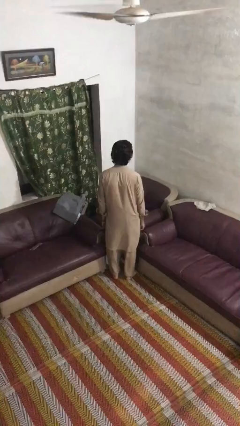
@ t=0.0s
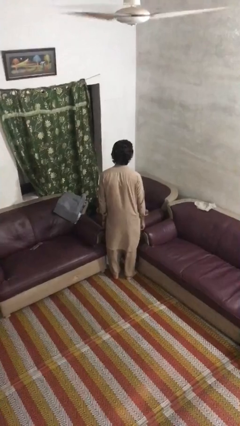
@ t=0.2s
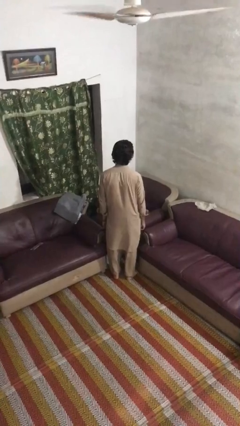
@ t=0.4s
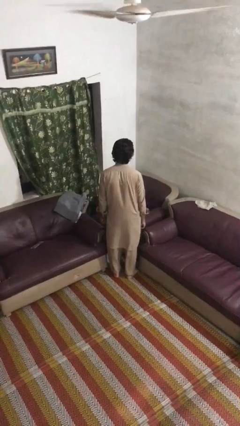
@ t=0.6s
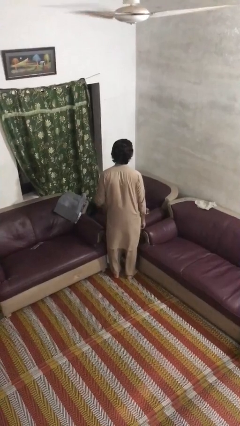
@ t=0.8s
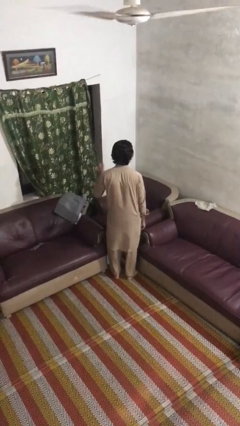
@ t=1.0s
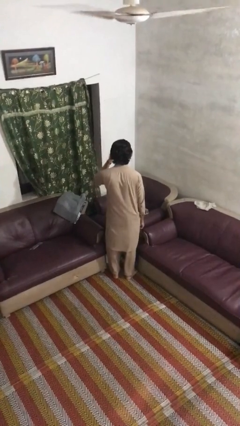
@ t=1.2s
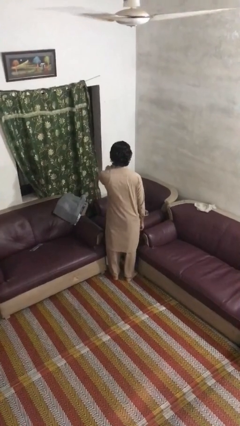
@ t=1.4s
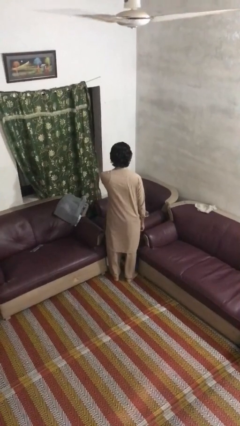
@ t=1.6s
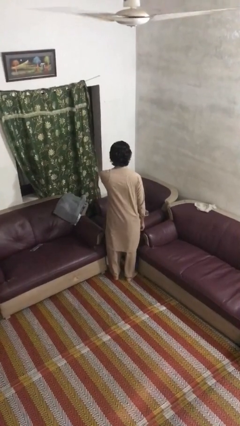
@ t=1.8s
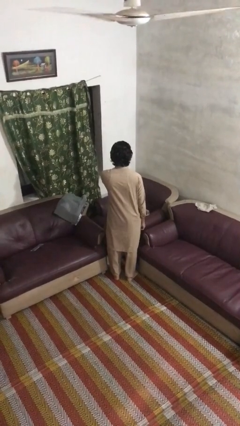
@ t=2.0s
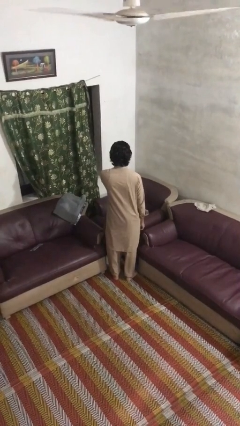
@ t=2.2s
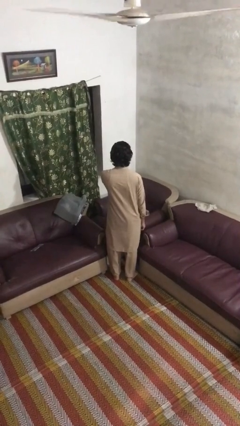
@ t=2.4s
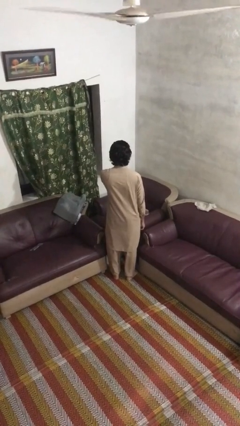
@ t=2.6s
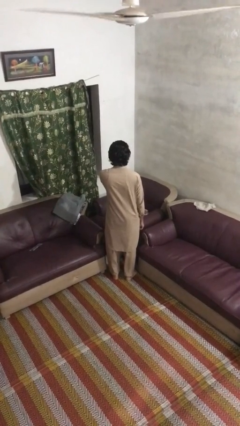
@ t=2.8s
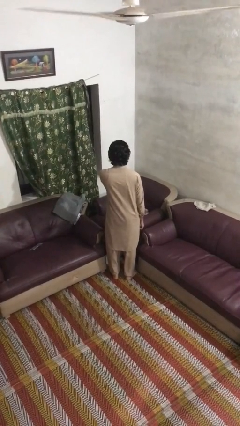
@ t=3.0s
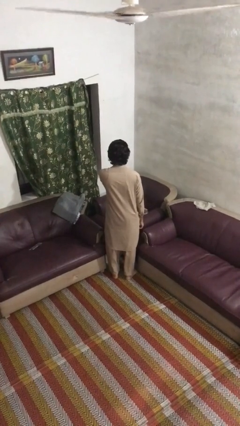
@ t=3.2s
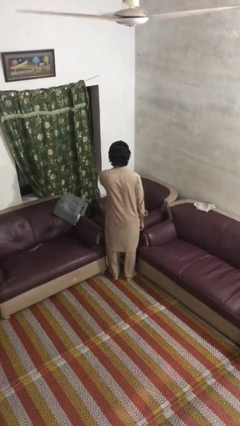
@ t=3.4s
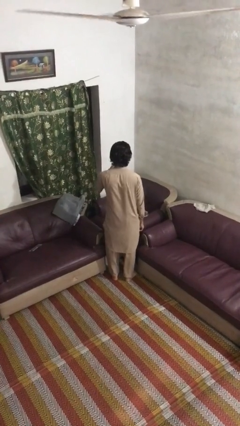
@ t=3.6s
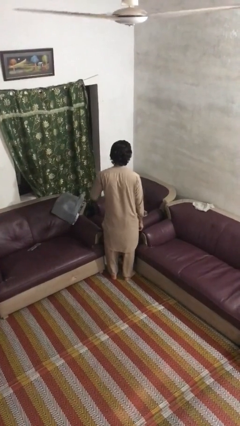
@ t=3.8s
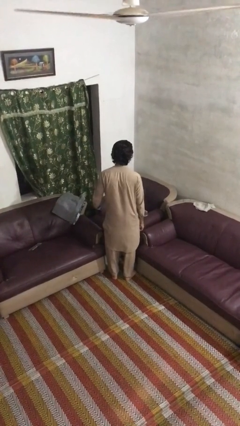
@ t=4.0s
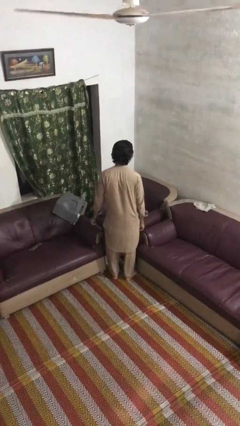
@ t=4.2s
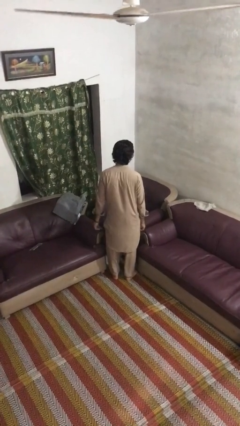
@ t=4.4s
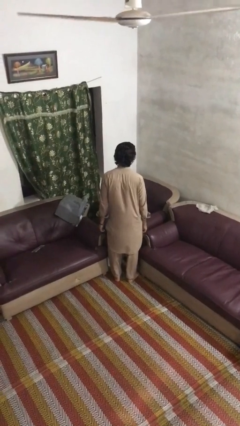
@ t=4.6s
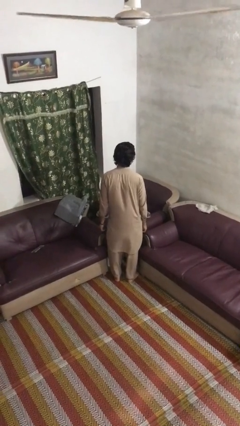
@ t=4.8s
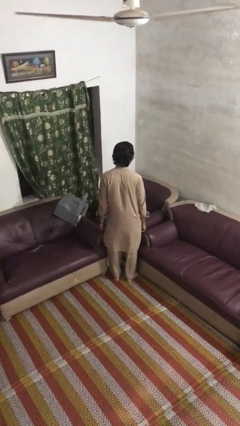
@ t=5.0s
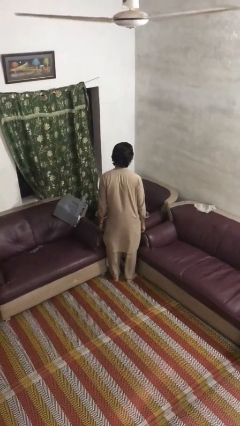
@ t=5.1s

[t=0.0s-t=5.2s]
person scratches face

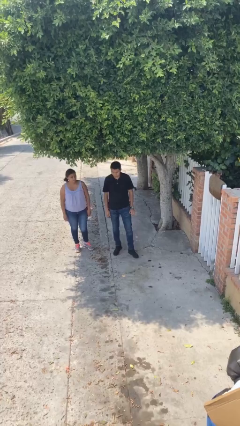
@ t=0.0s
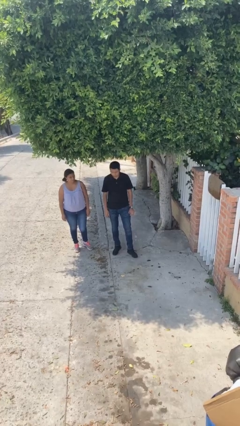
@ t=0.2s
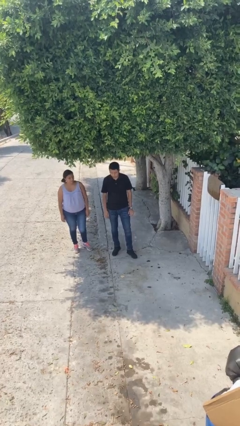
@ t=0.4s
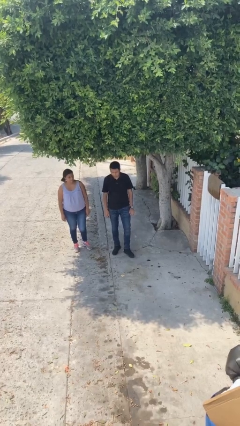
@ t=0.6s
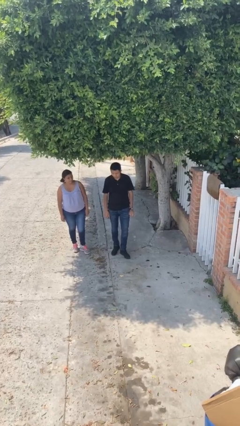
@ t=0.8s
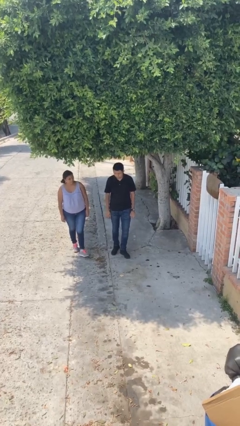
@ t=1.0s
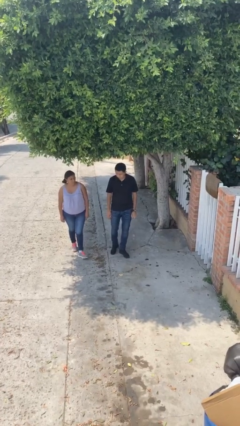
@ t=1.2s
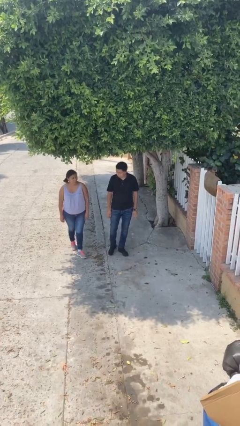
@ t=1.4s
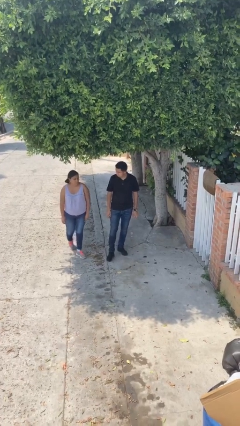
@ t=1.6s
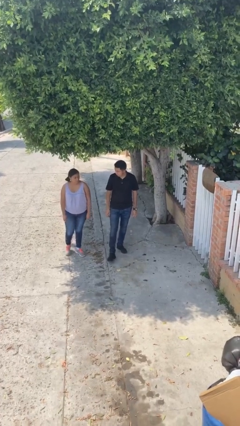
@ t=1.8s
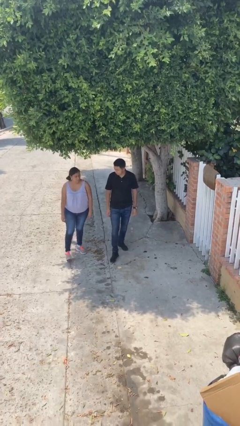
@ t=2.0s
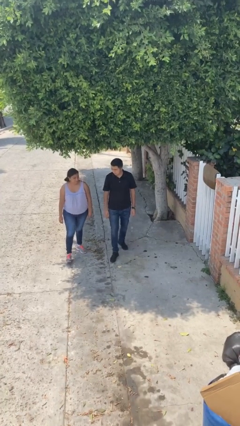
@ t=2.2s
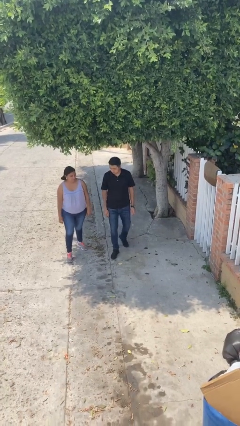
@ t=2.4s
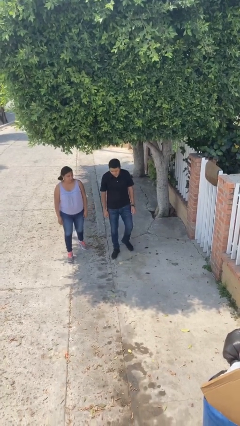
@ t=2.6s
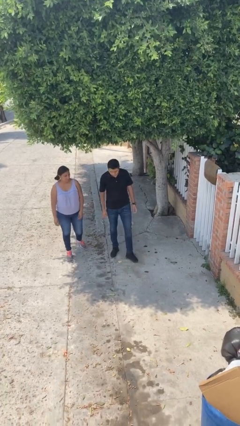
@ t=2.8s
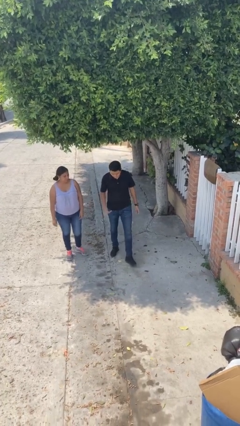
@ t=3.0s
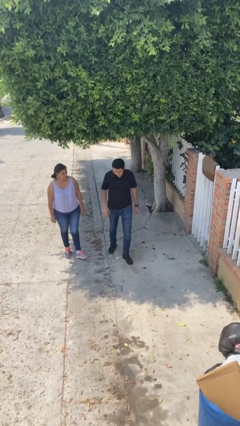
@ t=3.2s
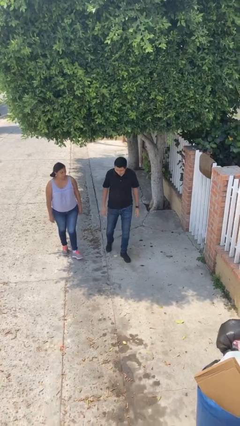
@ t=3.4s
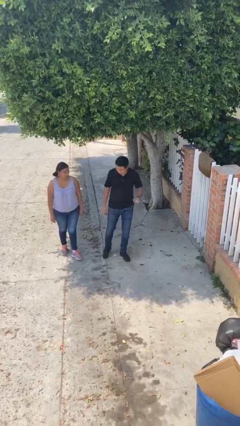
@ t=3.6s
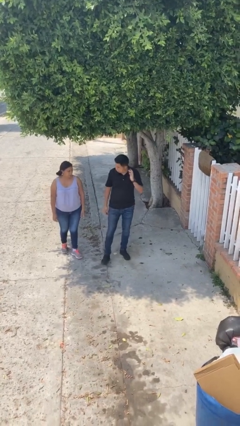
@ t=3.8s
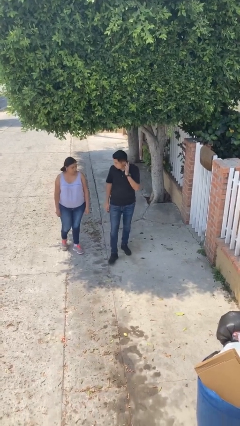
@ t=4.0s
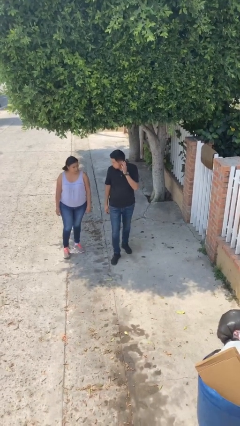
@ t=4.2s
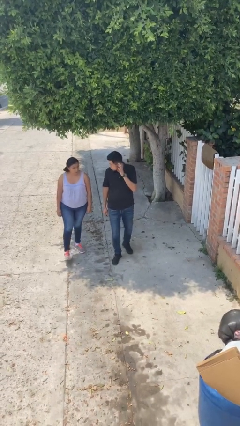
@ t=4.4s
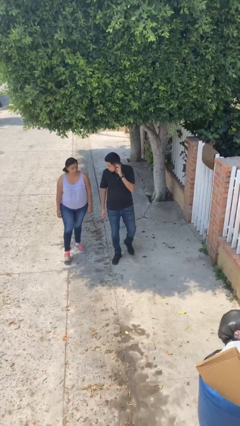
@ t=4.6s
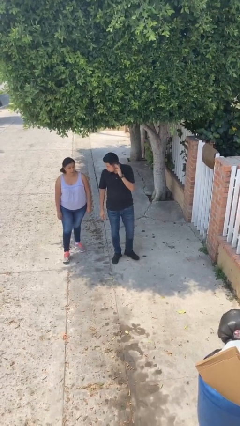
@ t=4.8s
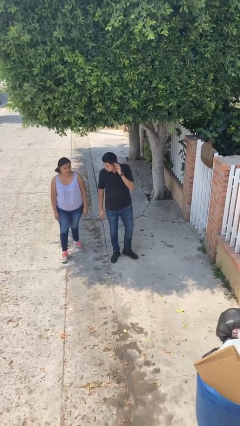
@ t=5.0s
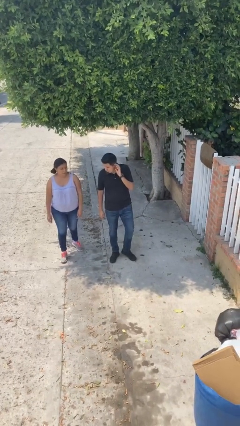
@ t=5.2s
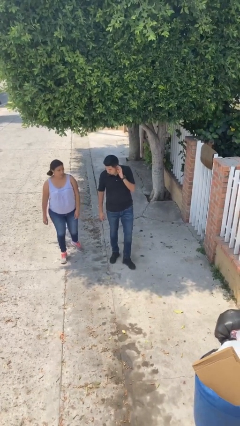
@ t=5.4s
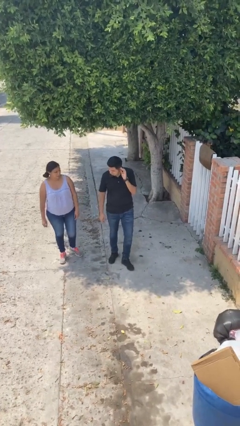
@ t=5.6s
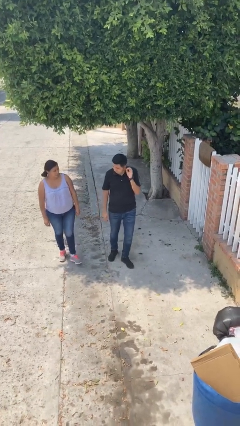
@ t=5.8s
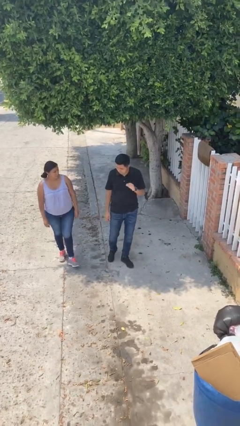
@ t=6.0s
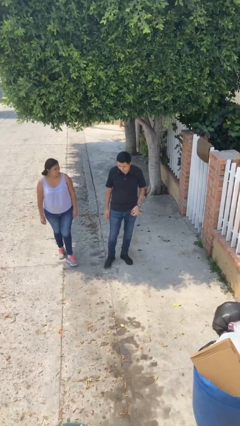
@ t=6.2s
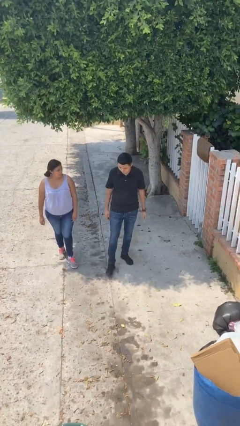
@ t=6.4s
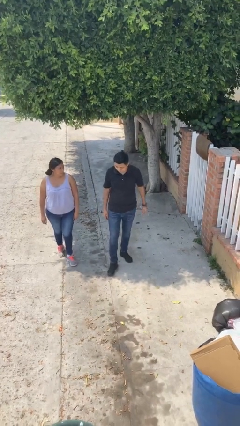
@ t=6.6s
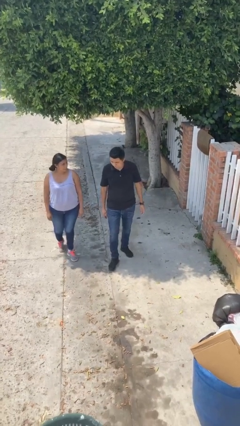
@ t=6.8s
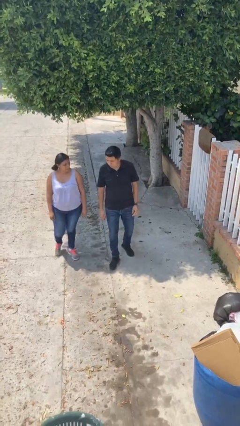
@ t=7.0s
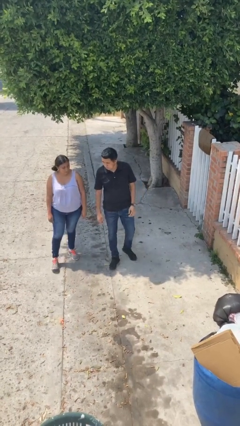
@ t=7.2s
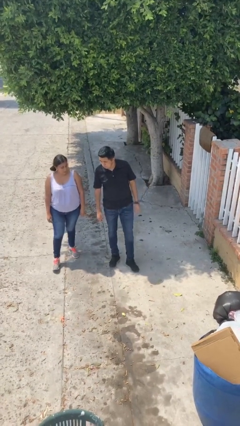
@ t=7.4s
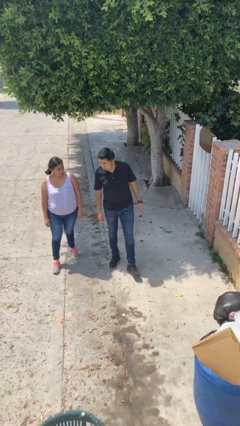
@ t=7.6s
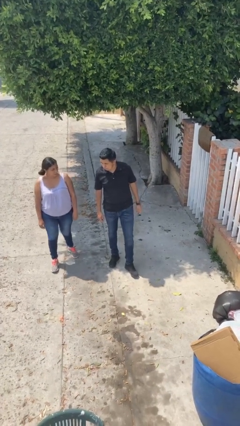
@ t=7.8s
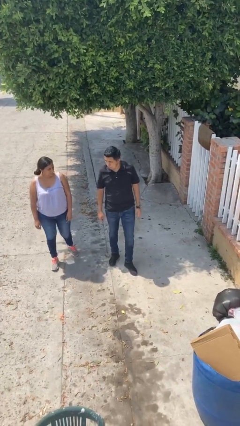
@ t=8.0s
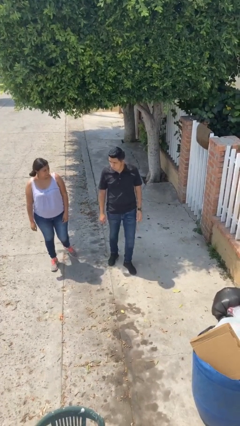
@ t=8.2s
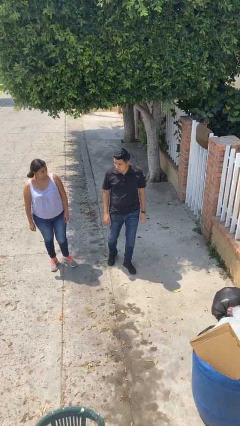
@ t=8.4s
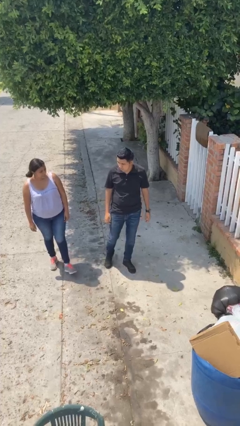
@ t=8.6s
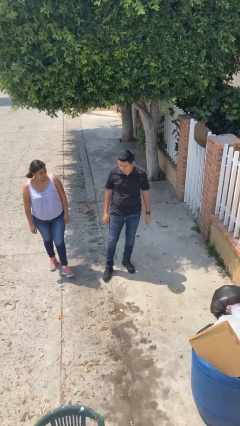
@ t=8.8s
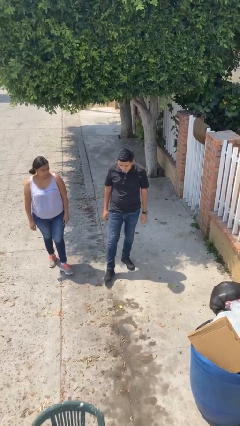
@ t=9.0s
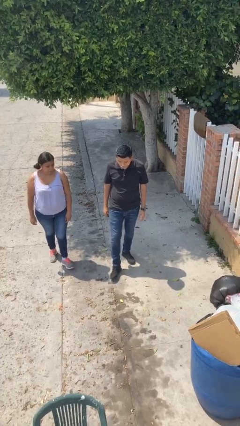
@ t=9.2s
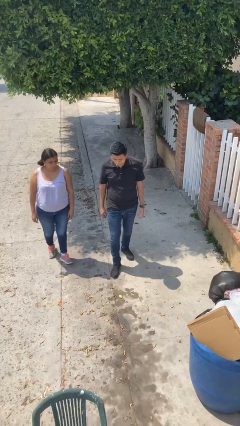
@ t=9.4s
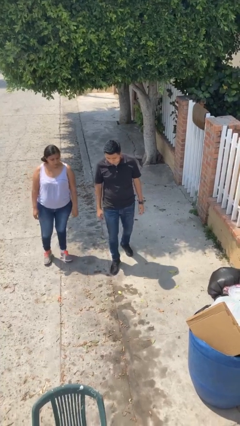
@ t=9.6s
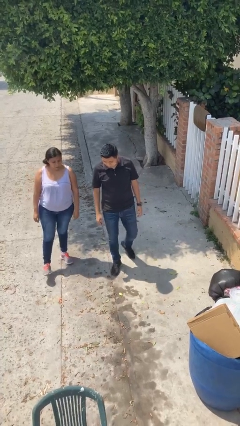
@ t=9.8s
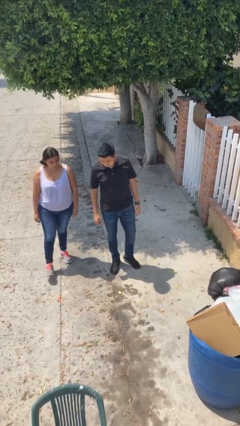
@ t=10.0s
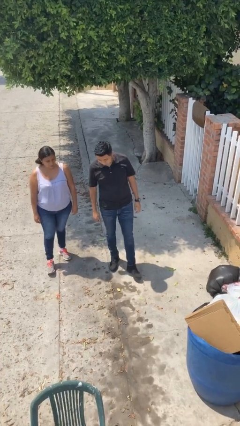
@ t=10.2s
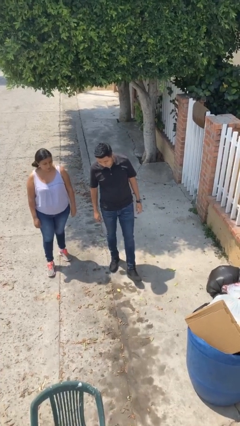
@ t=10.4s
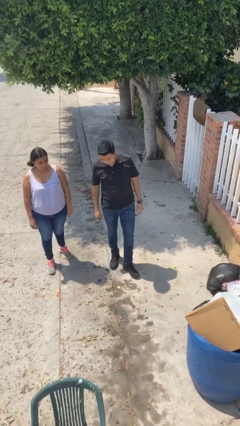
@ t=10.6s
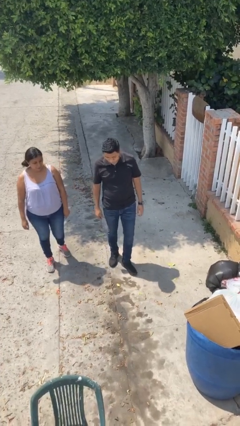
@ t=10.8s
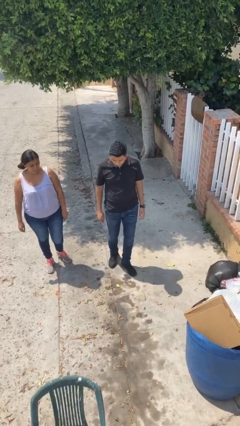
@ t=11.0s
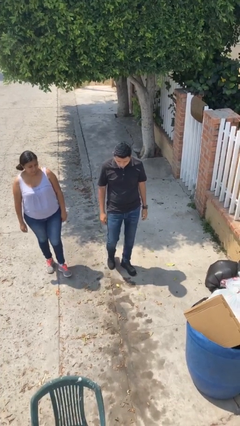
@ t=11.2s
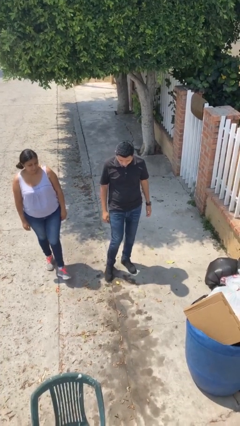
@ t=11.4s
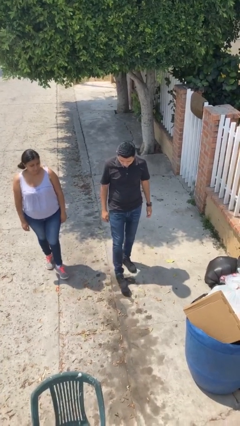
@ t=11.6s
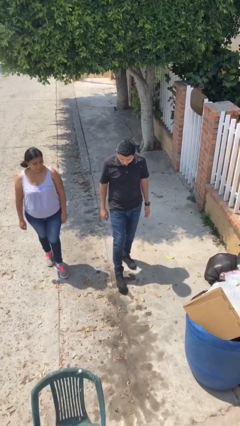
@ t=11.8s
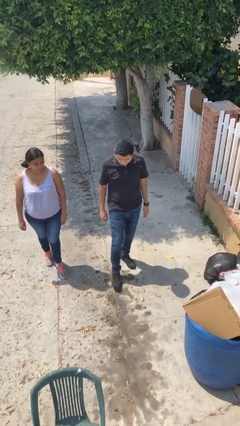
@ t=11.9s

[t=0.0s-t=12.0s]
person talks to person

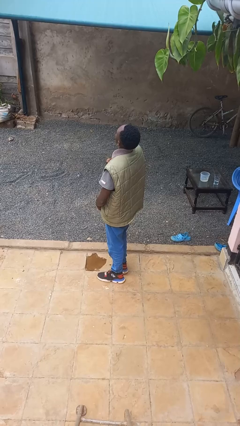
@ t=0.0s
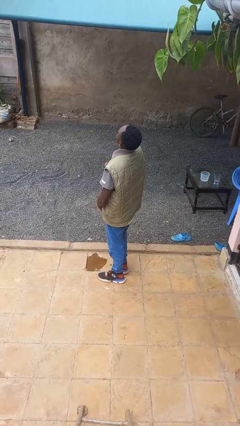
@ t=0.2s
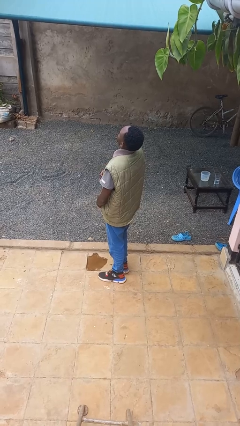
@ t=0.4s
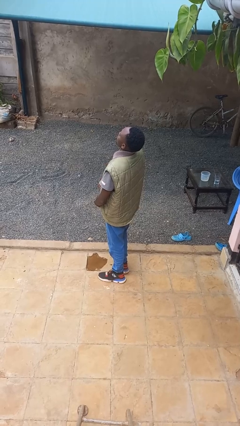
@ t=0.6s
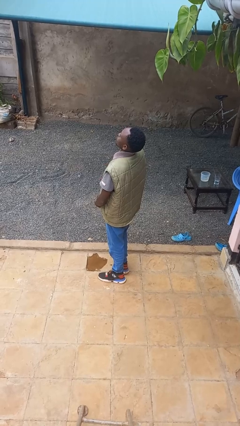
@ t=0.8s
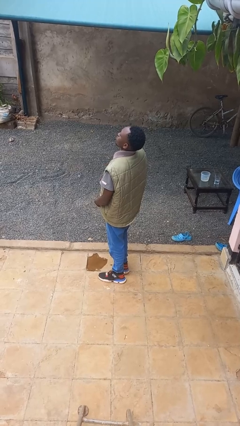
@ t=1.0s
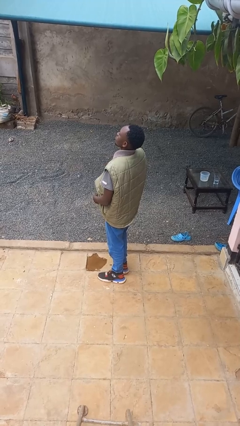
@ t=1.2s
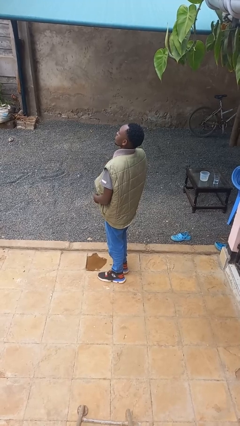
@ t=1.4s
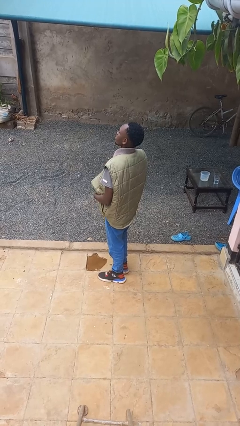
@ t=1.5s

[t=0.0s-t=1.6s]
person unzips jacket
